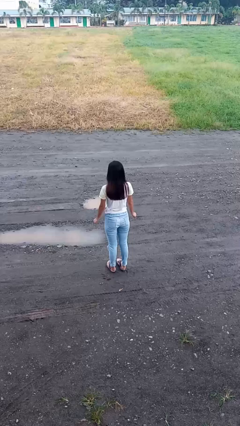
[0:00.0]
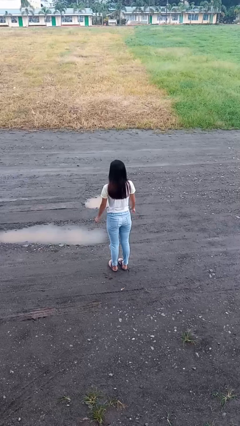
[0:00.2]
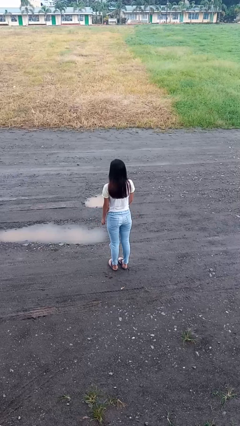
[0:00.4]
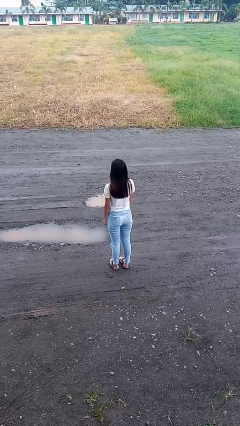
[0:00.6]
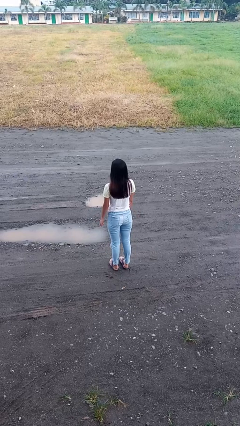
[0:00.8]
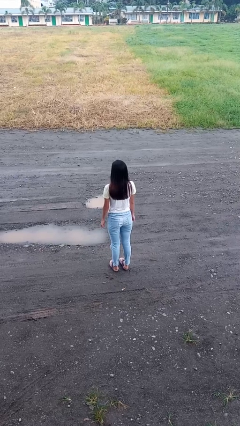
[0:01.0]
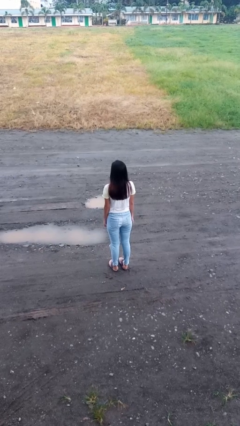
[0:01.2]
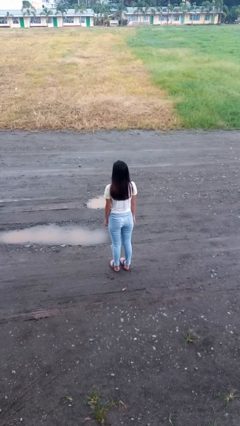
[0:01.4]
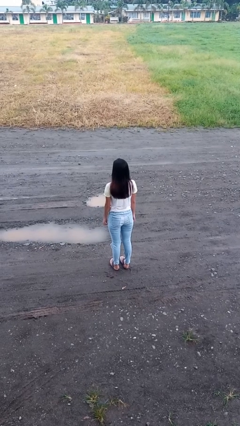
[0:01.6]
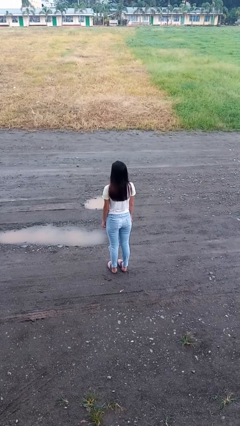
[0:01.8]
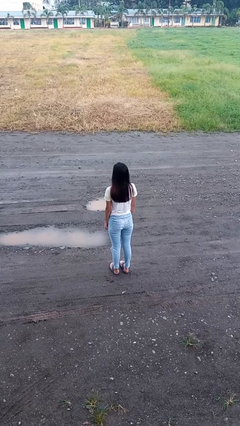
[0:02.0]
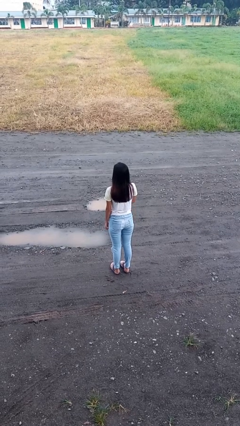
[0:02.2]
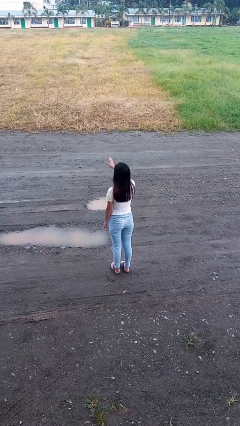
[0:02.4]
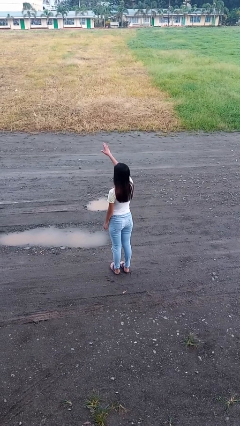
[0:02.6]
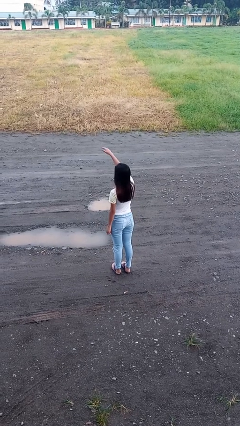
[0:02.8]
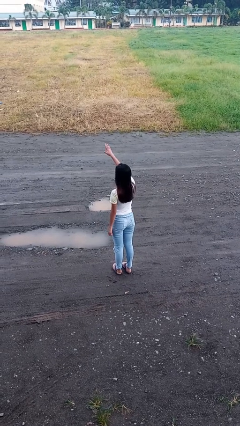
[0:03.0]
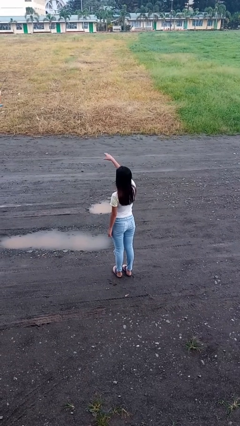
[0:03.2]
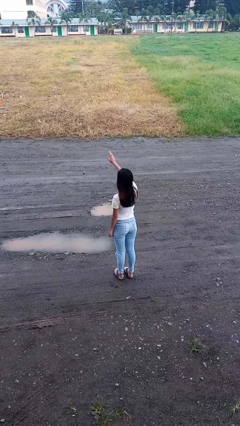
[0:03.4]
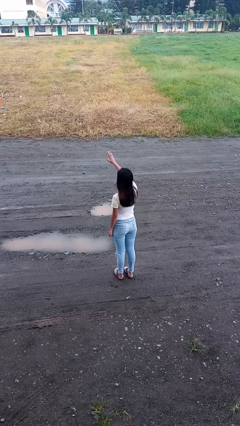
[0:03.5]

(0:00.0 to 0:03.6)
person gestures come here

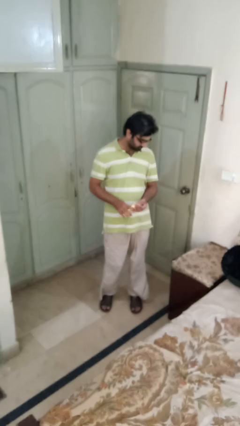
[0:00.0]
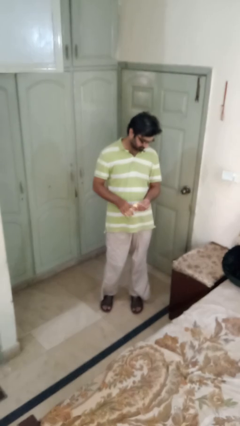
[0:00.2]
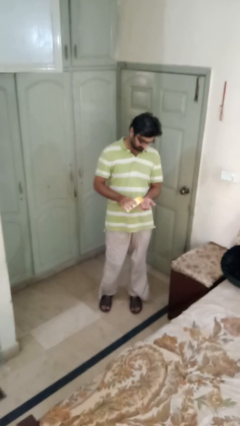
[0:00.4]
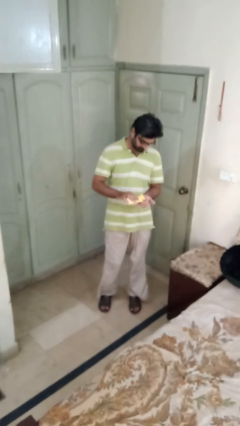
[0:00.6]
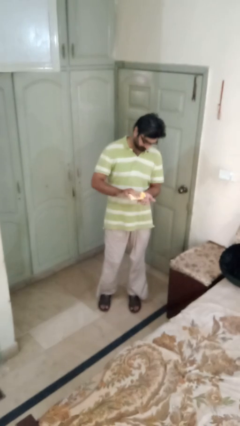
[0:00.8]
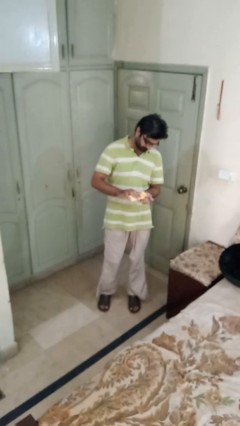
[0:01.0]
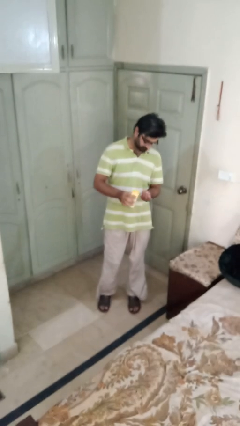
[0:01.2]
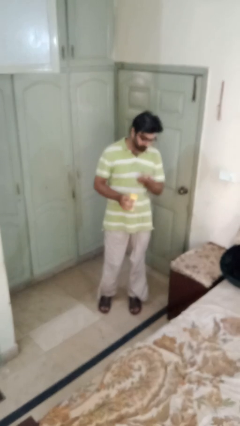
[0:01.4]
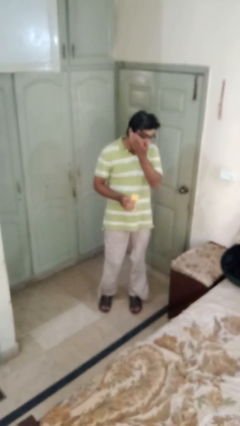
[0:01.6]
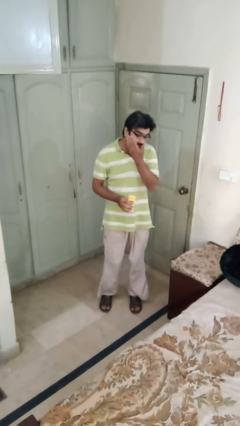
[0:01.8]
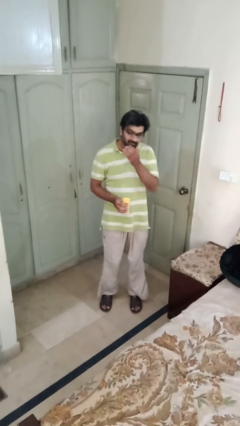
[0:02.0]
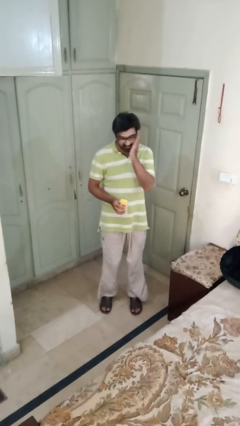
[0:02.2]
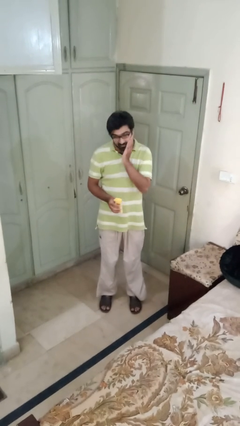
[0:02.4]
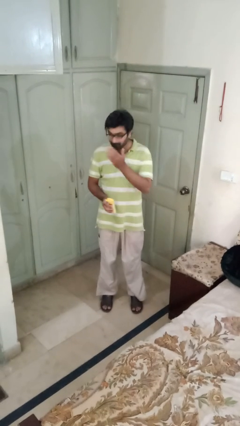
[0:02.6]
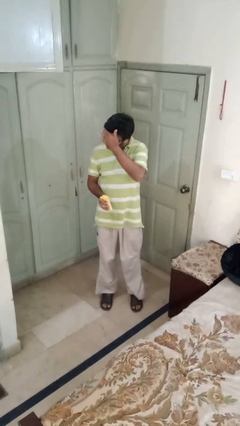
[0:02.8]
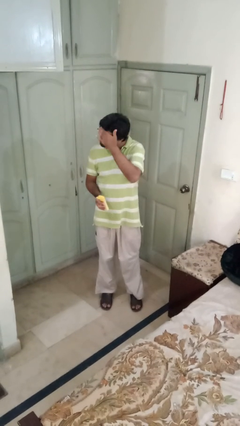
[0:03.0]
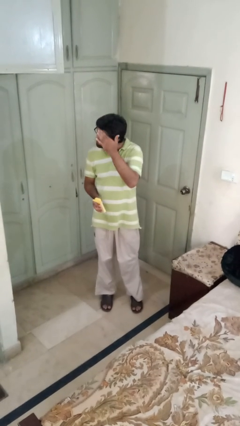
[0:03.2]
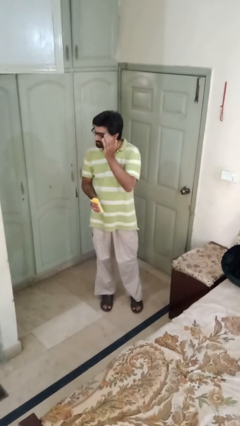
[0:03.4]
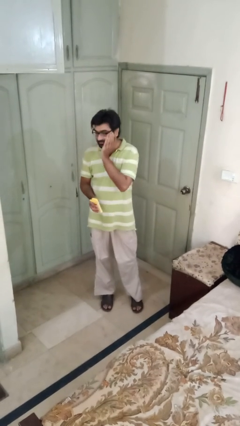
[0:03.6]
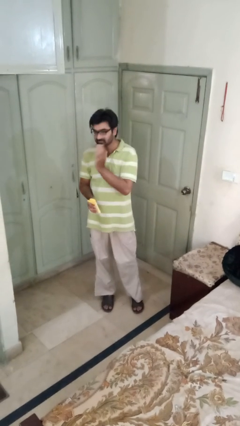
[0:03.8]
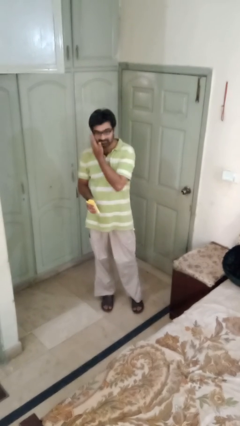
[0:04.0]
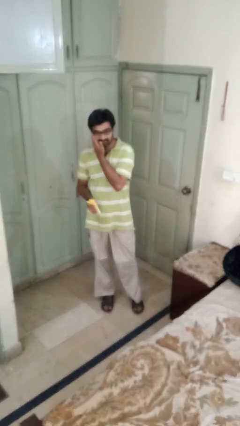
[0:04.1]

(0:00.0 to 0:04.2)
person applies facial moisturizer

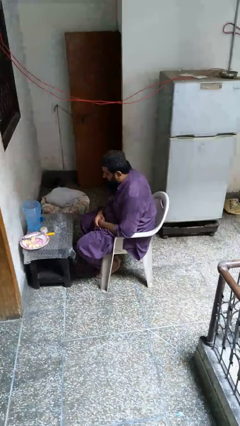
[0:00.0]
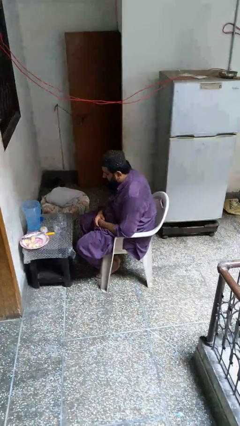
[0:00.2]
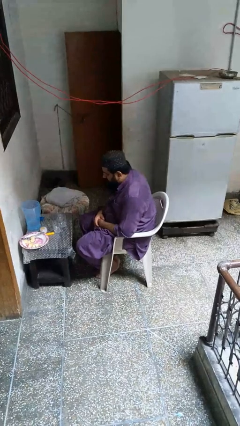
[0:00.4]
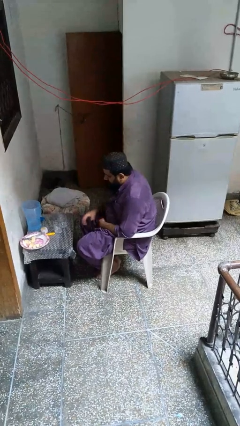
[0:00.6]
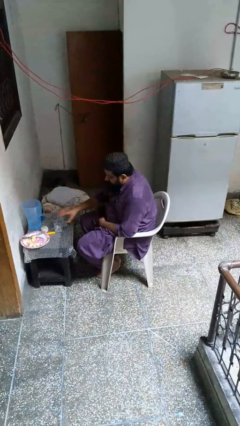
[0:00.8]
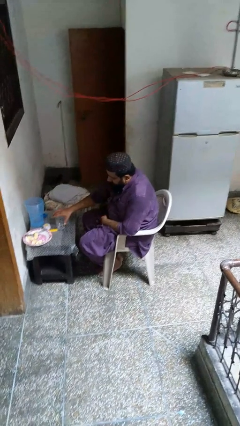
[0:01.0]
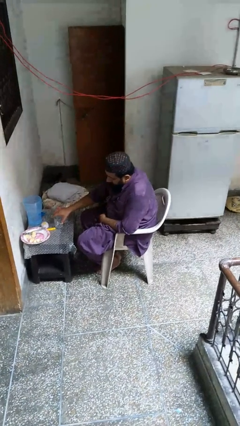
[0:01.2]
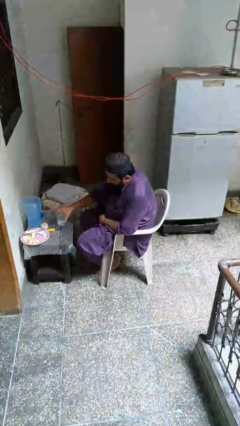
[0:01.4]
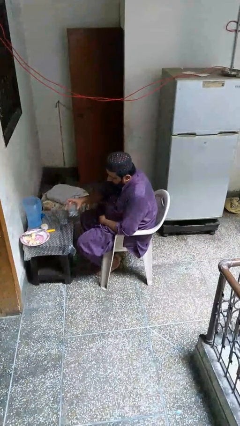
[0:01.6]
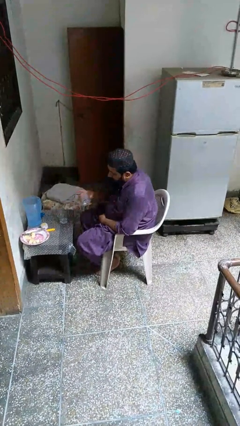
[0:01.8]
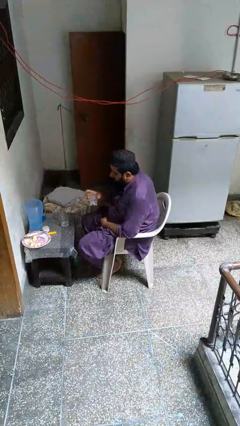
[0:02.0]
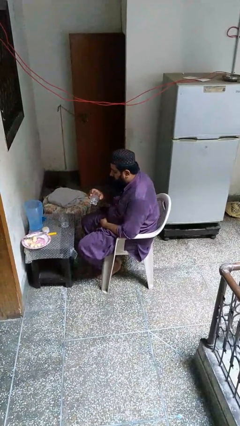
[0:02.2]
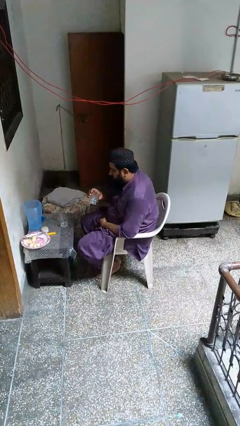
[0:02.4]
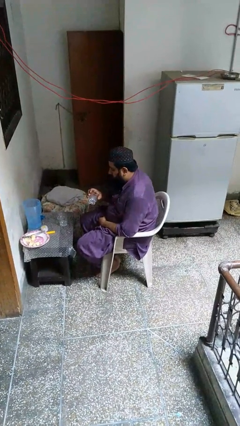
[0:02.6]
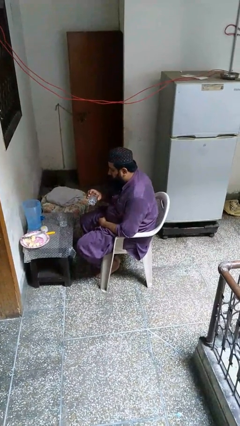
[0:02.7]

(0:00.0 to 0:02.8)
person picks up object from table

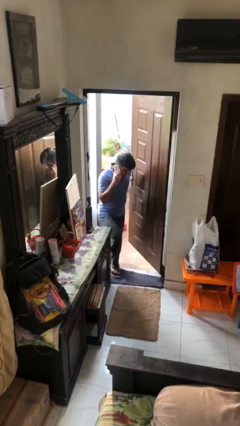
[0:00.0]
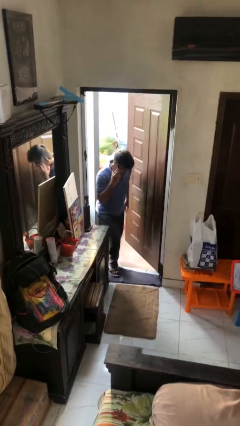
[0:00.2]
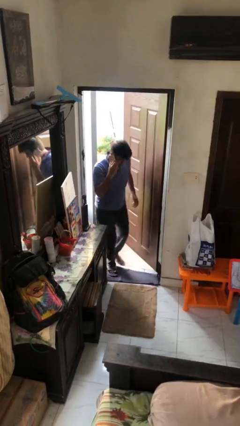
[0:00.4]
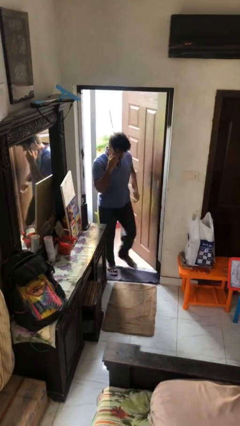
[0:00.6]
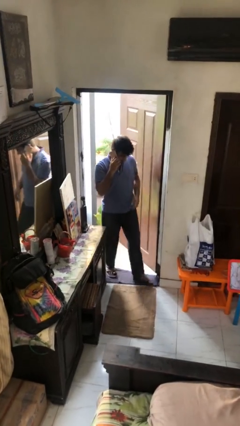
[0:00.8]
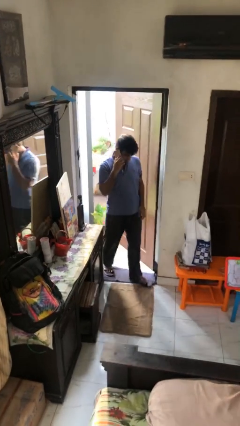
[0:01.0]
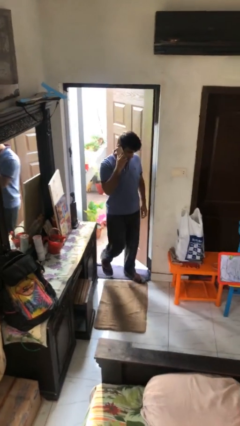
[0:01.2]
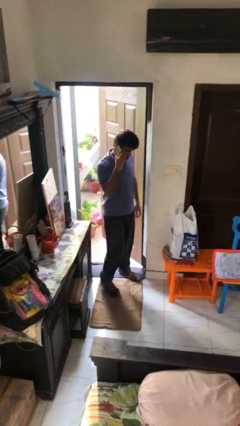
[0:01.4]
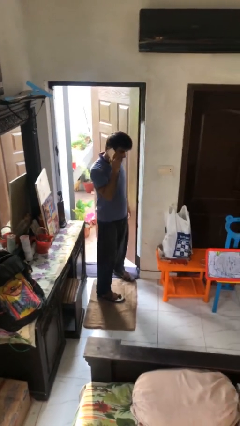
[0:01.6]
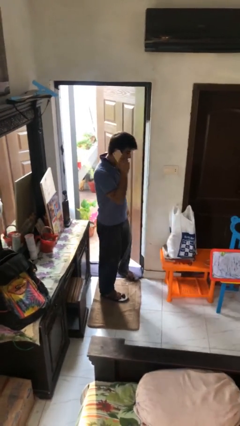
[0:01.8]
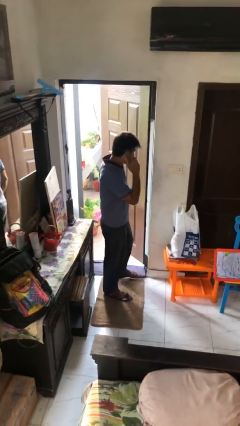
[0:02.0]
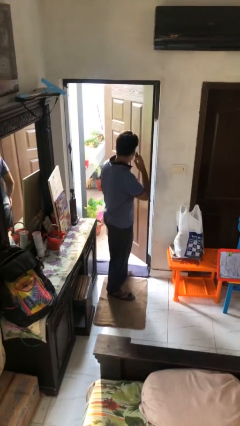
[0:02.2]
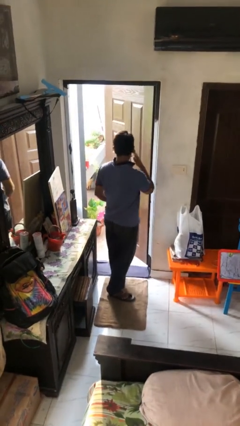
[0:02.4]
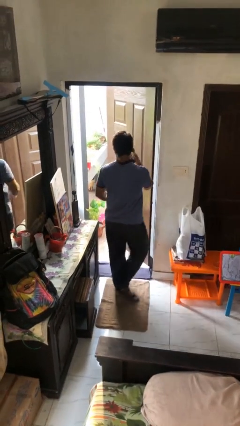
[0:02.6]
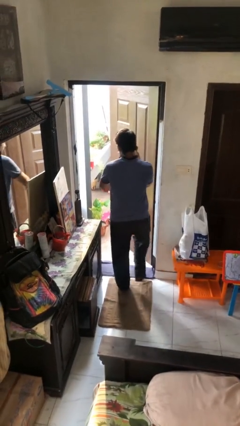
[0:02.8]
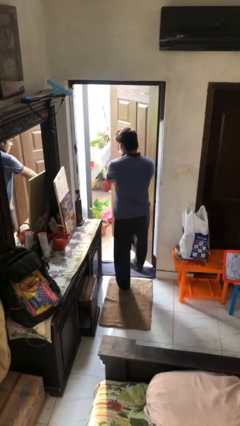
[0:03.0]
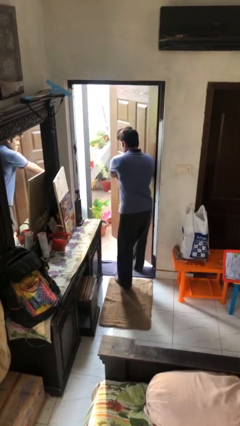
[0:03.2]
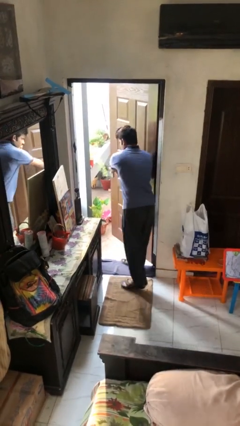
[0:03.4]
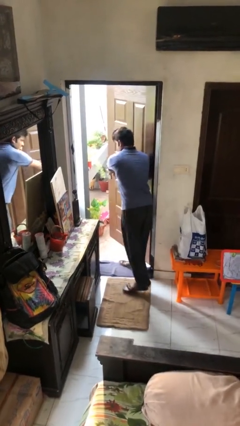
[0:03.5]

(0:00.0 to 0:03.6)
person enters scene through structure

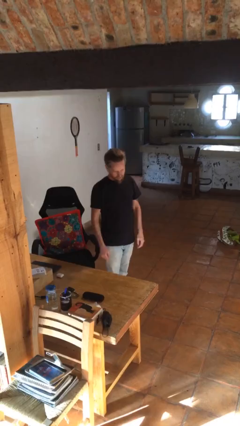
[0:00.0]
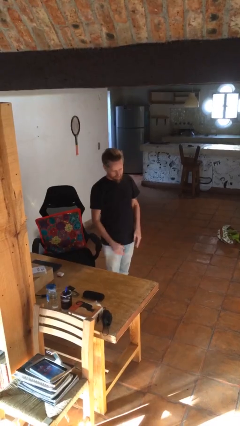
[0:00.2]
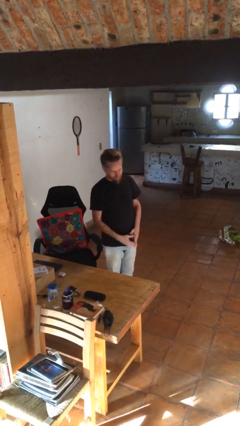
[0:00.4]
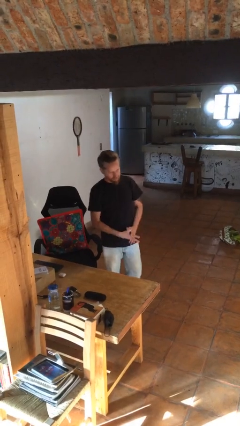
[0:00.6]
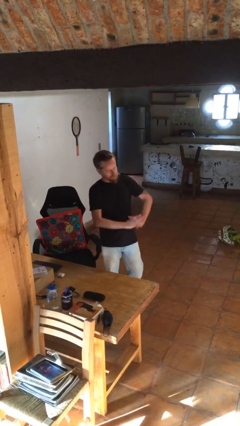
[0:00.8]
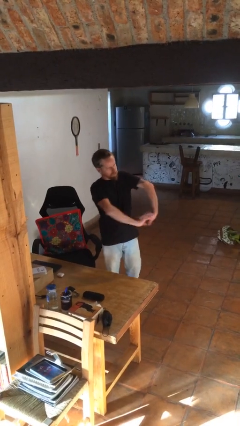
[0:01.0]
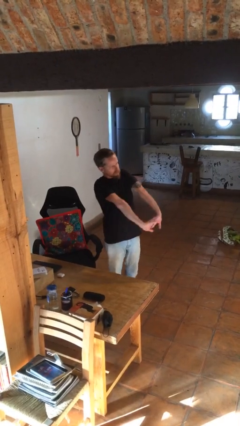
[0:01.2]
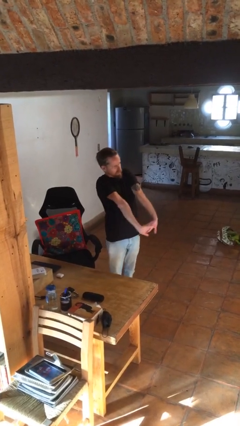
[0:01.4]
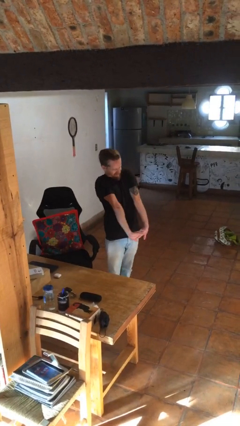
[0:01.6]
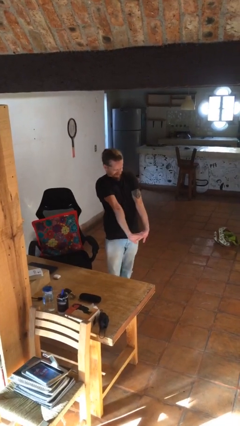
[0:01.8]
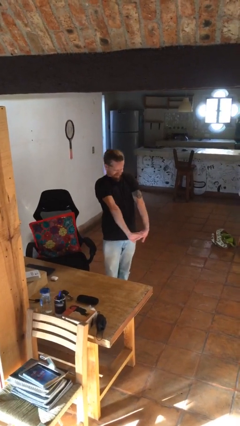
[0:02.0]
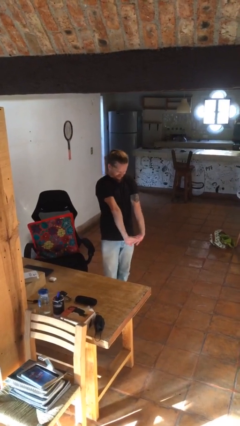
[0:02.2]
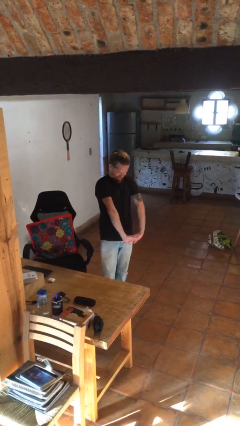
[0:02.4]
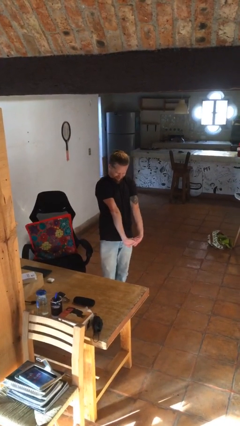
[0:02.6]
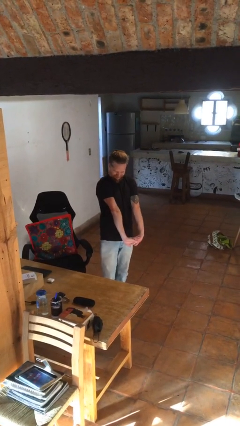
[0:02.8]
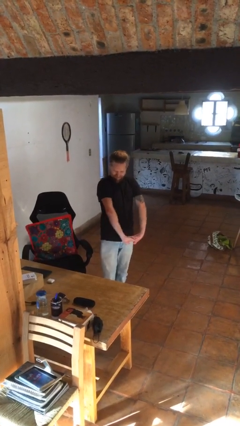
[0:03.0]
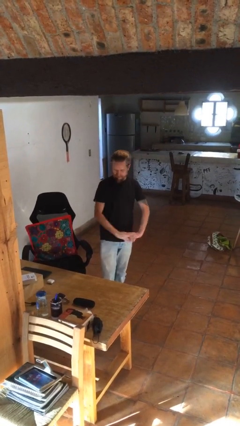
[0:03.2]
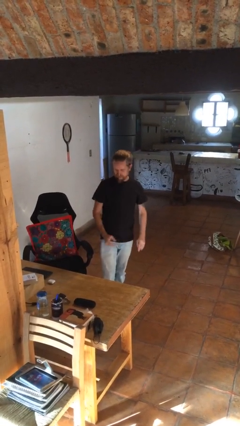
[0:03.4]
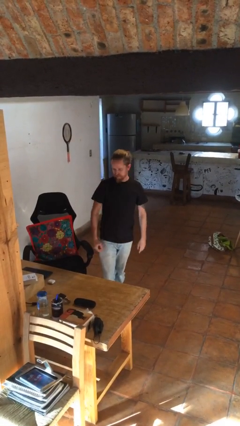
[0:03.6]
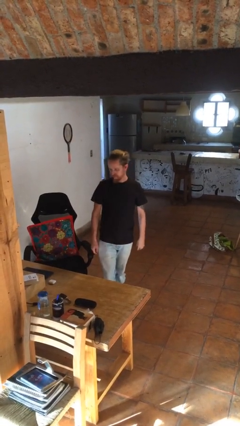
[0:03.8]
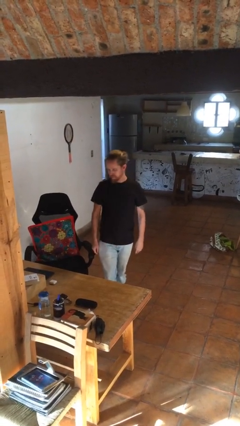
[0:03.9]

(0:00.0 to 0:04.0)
person cracks knuckles
